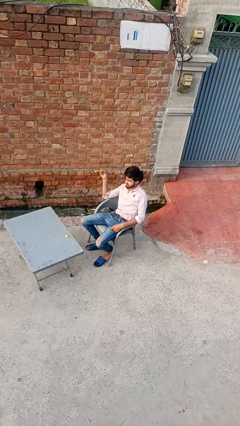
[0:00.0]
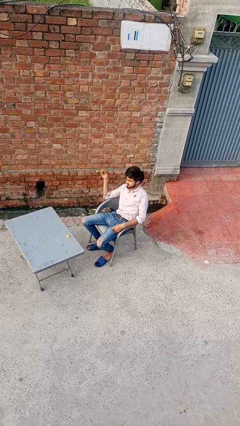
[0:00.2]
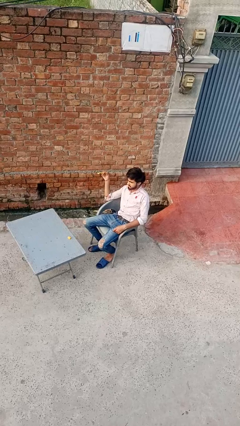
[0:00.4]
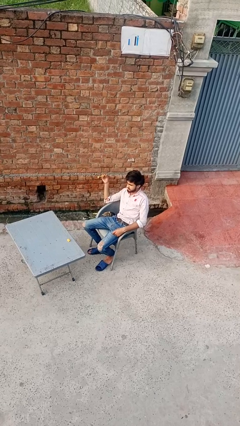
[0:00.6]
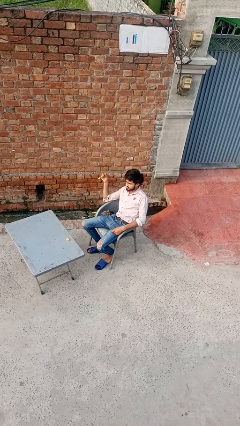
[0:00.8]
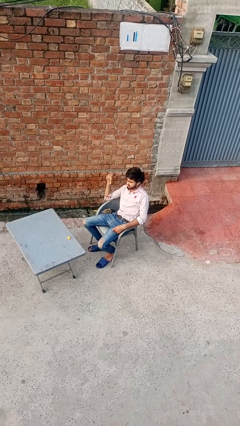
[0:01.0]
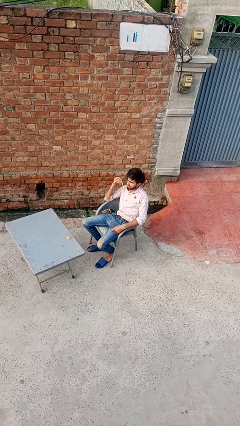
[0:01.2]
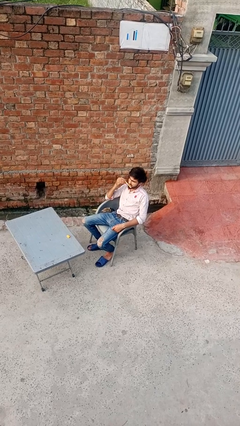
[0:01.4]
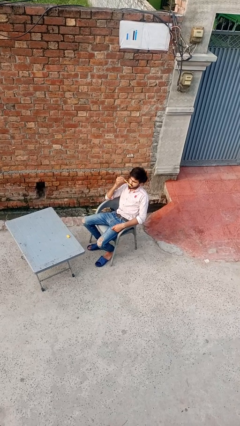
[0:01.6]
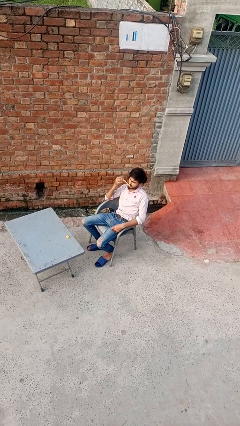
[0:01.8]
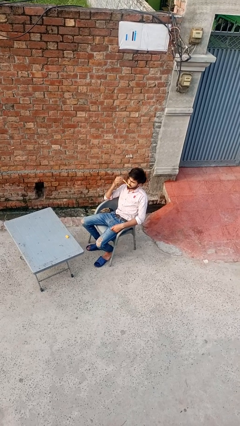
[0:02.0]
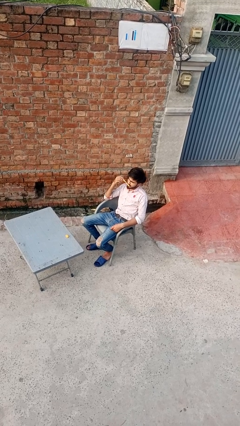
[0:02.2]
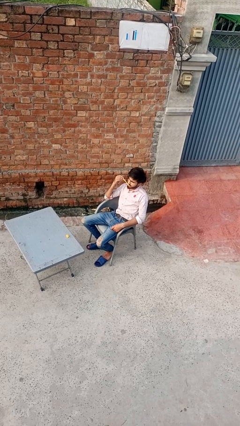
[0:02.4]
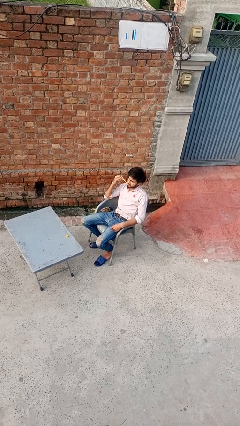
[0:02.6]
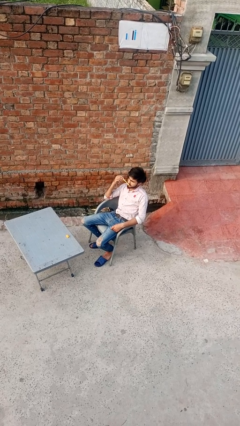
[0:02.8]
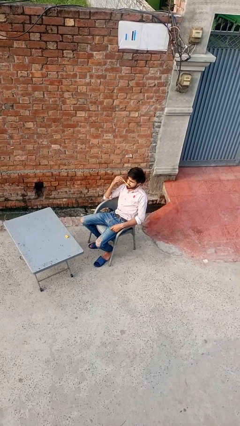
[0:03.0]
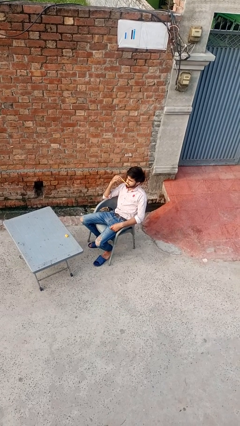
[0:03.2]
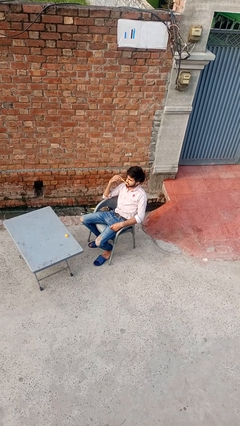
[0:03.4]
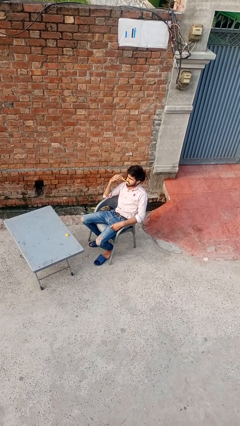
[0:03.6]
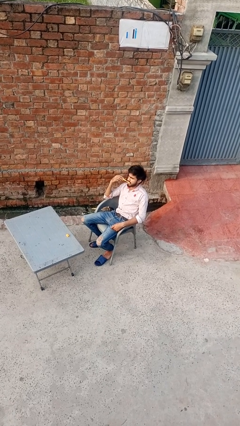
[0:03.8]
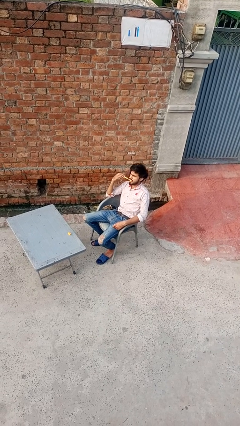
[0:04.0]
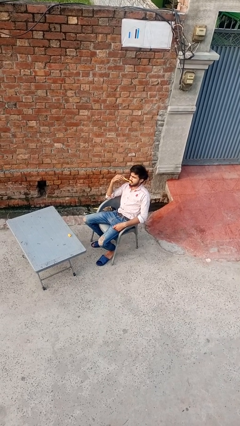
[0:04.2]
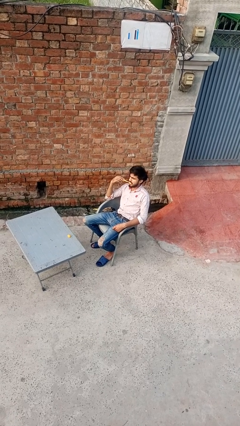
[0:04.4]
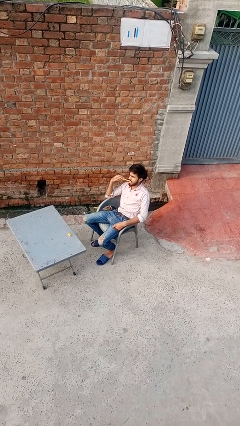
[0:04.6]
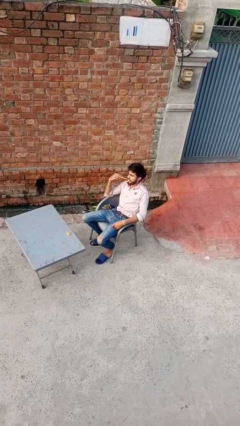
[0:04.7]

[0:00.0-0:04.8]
person brushes teeth

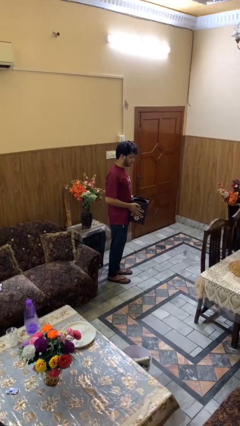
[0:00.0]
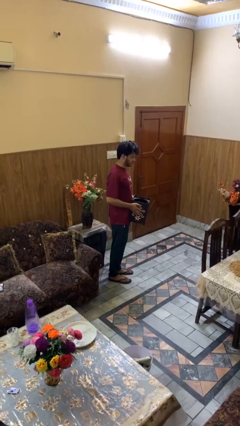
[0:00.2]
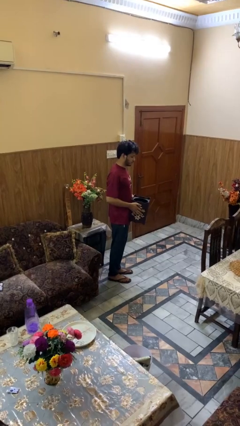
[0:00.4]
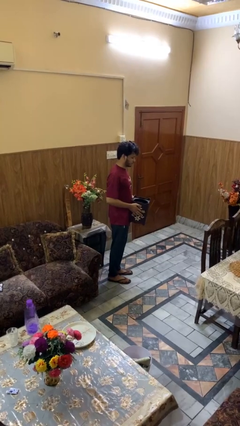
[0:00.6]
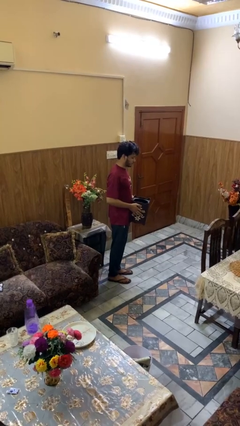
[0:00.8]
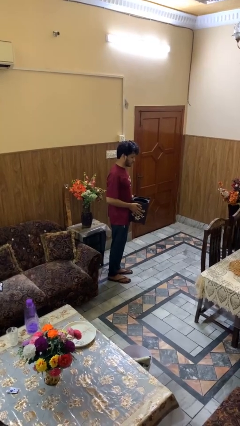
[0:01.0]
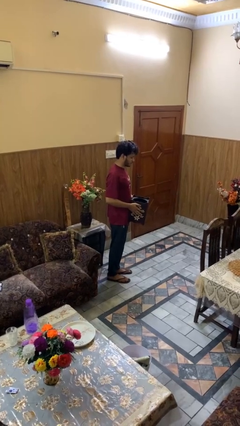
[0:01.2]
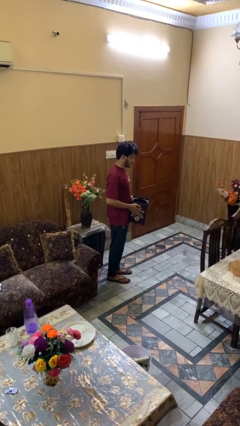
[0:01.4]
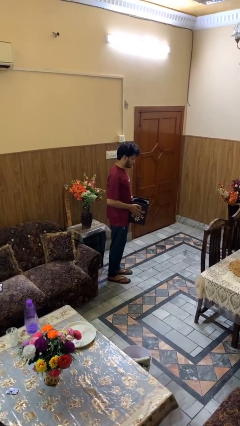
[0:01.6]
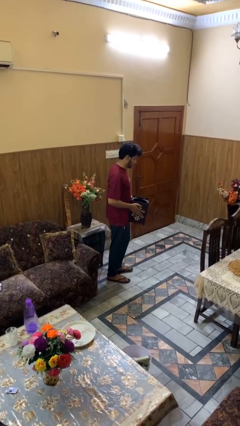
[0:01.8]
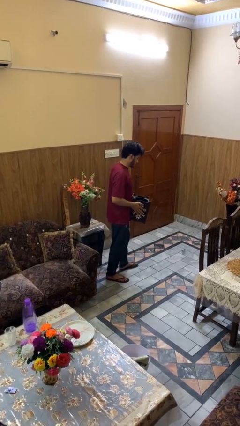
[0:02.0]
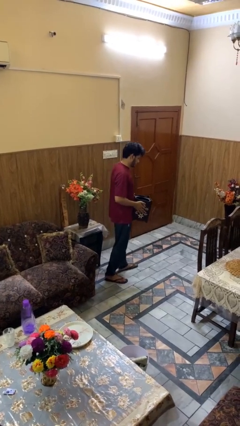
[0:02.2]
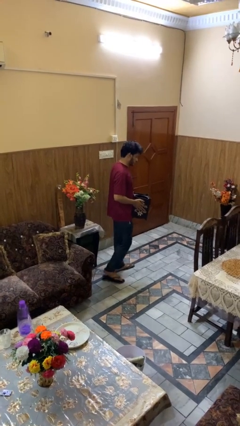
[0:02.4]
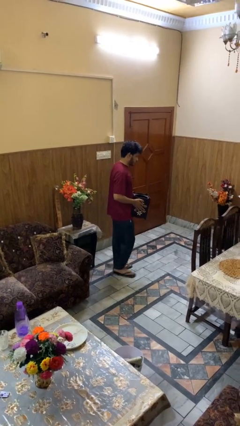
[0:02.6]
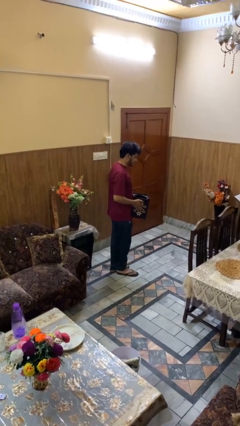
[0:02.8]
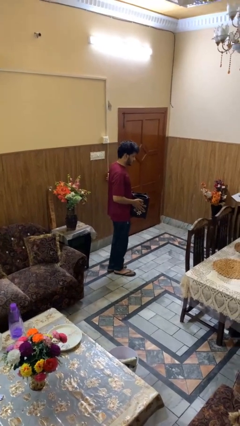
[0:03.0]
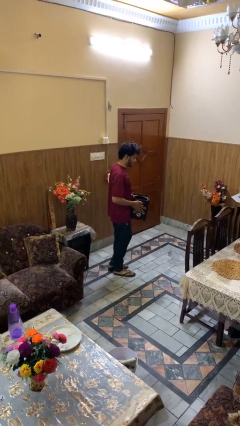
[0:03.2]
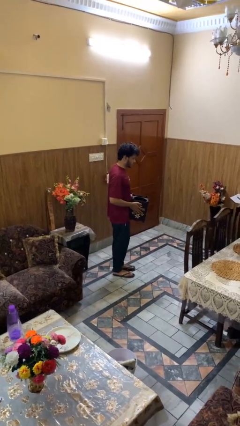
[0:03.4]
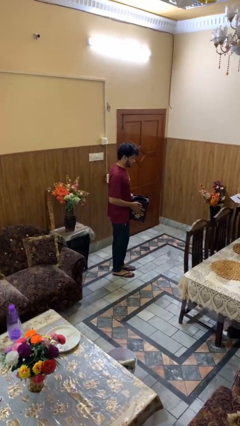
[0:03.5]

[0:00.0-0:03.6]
person carries groceries

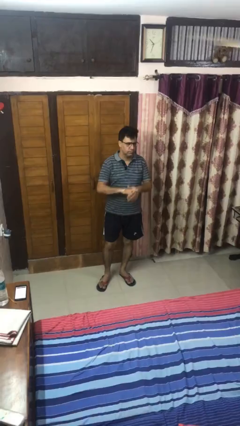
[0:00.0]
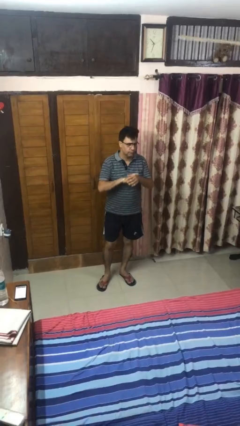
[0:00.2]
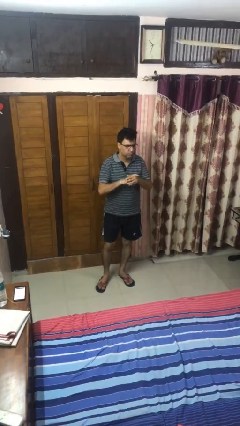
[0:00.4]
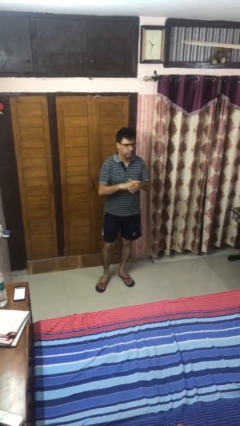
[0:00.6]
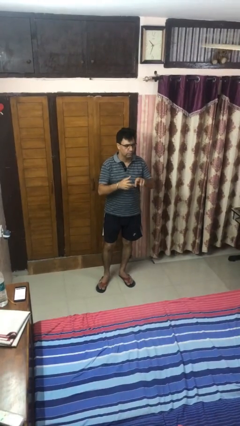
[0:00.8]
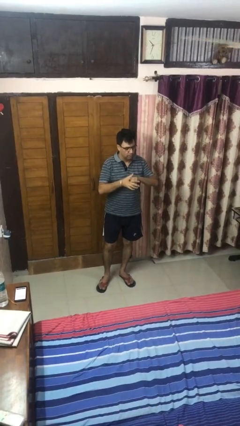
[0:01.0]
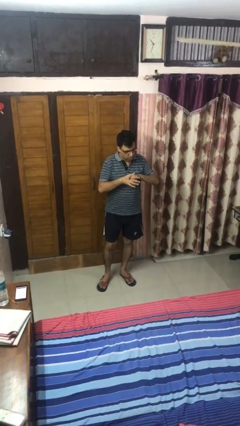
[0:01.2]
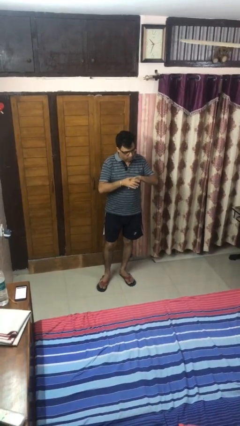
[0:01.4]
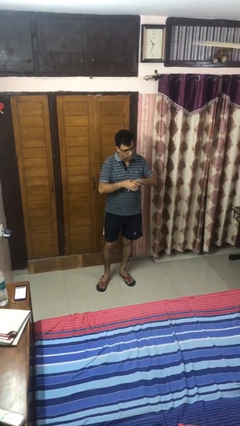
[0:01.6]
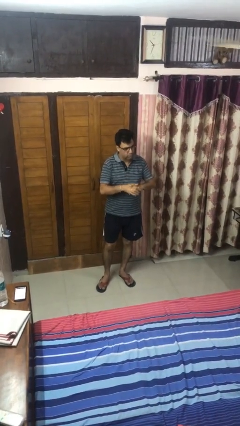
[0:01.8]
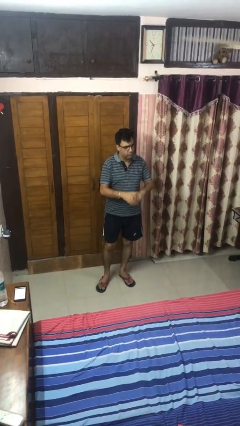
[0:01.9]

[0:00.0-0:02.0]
person cracks knuckles

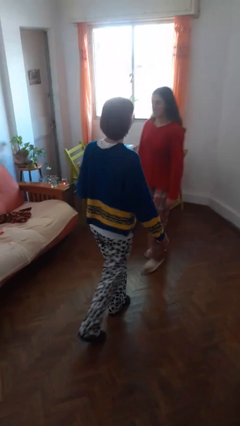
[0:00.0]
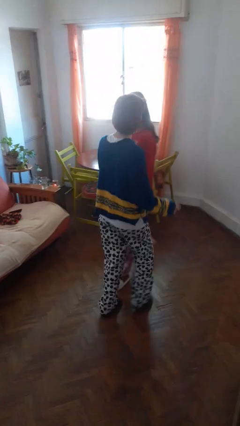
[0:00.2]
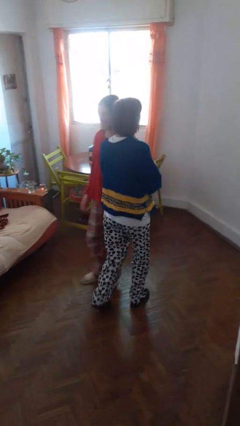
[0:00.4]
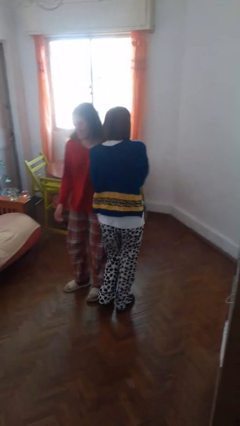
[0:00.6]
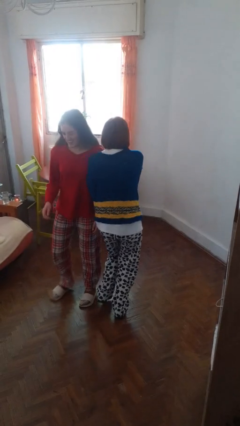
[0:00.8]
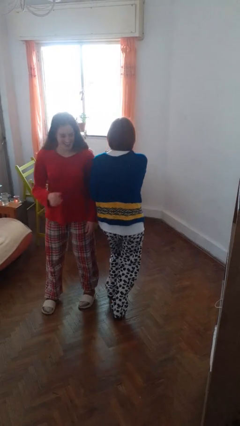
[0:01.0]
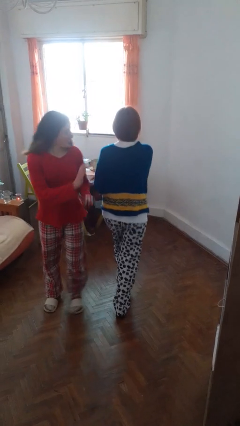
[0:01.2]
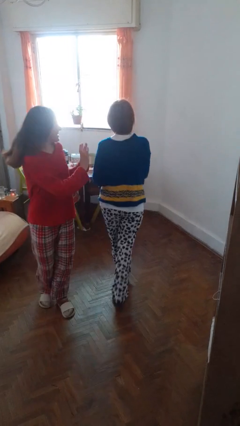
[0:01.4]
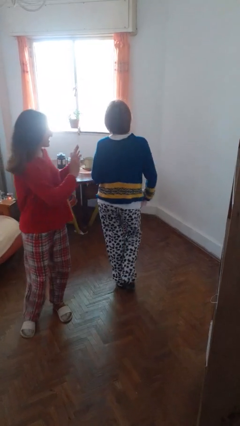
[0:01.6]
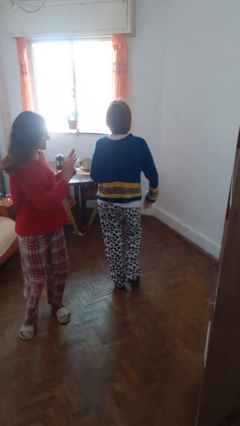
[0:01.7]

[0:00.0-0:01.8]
person bumps into person

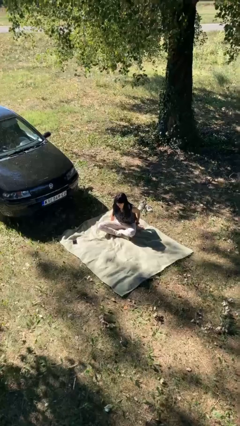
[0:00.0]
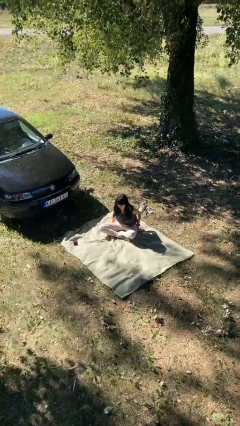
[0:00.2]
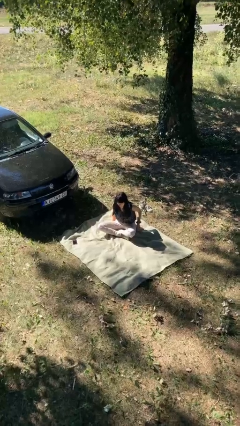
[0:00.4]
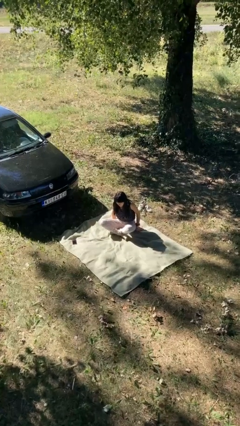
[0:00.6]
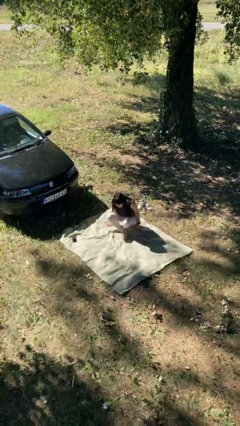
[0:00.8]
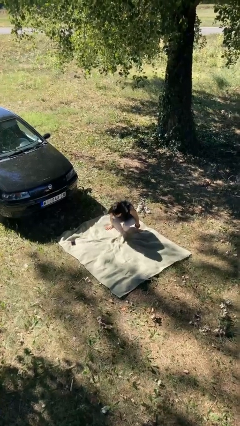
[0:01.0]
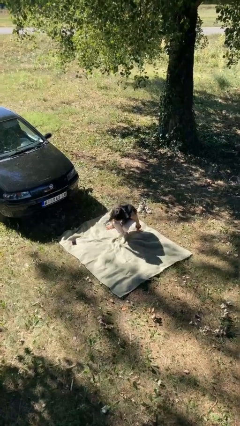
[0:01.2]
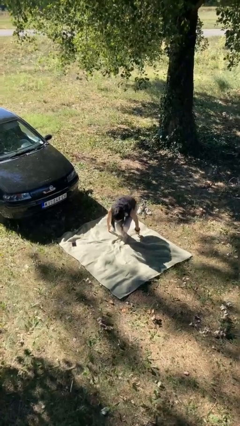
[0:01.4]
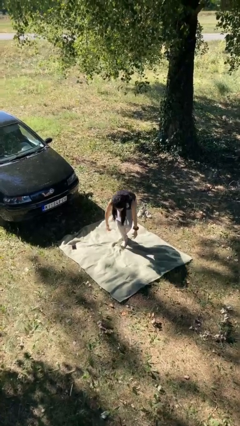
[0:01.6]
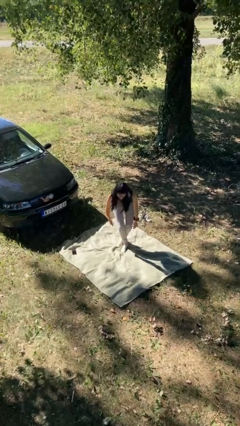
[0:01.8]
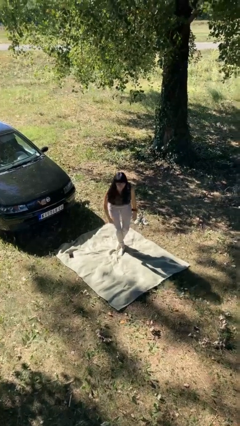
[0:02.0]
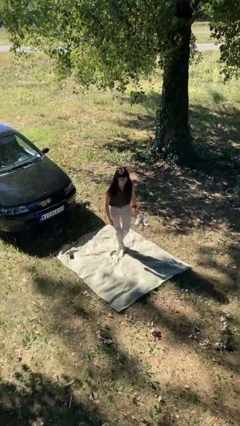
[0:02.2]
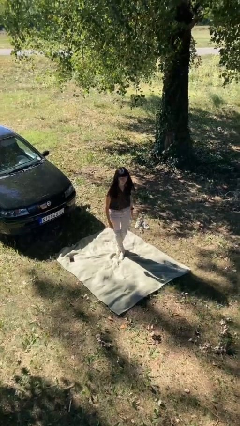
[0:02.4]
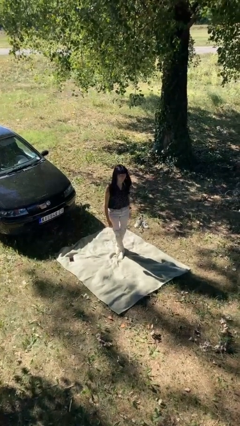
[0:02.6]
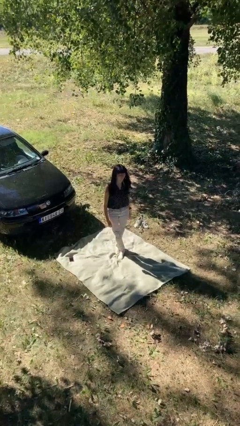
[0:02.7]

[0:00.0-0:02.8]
person stands up from floor

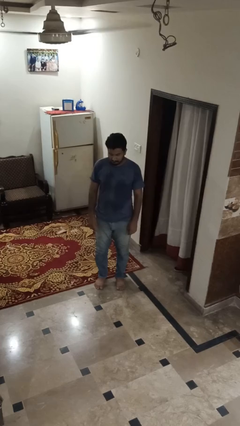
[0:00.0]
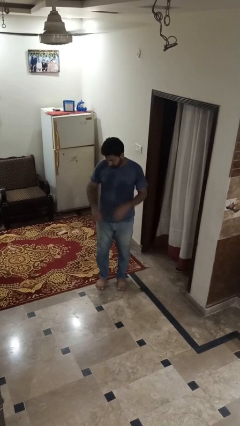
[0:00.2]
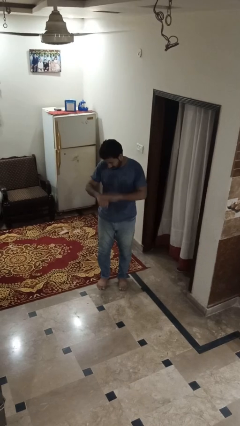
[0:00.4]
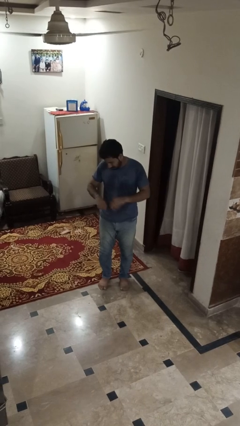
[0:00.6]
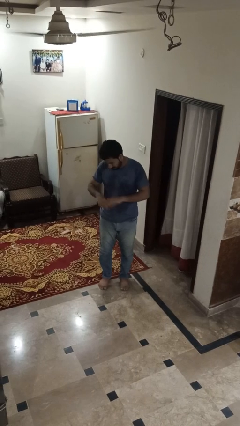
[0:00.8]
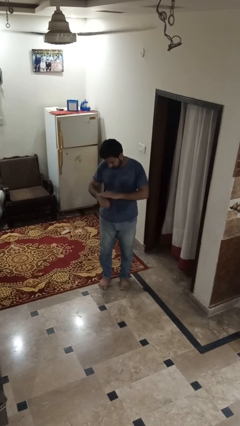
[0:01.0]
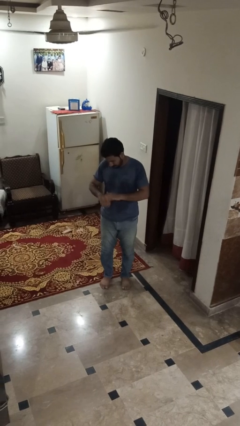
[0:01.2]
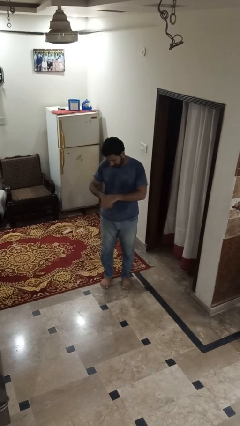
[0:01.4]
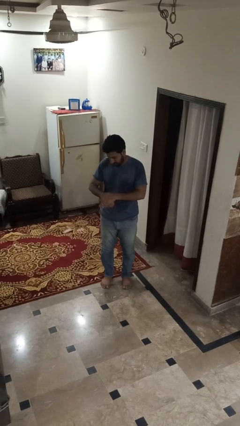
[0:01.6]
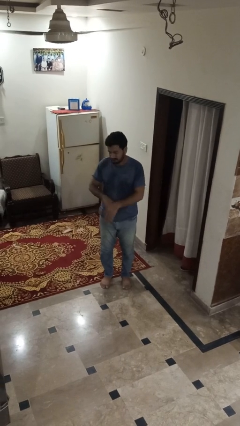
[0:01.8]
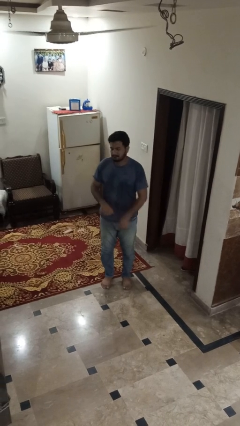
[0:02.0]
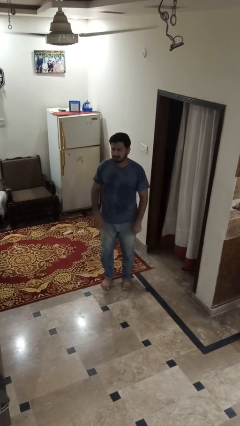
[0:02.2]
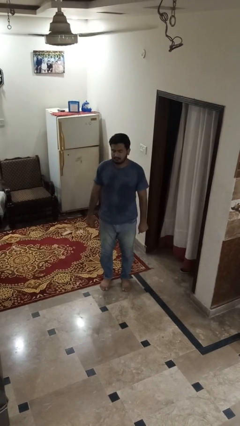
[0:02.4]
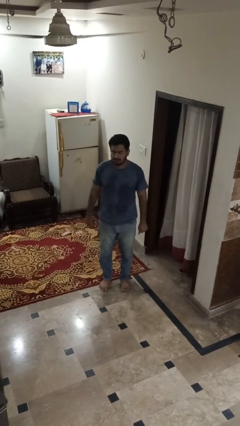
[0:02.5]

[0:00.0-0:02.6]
person swats bug
